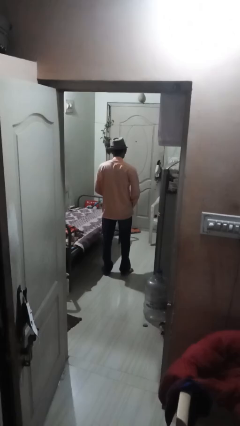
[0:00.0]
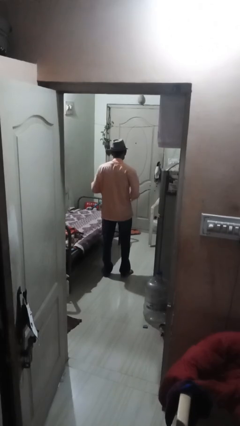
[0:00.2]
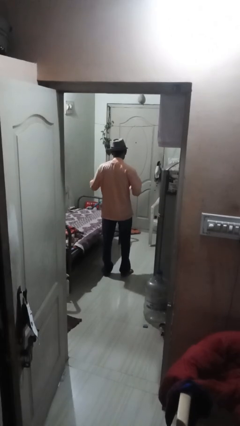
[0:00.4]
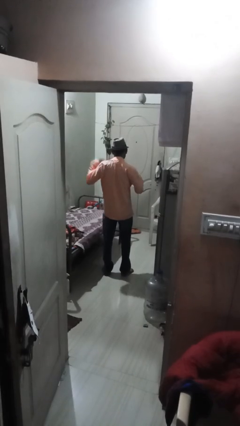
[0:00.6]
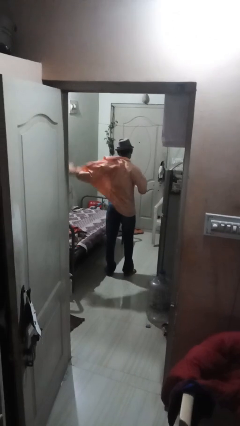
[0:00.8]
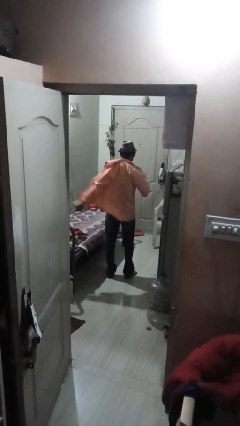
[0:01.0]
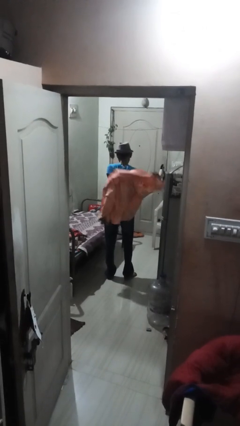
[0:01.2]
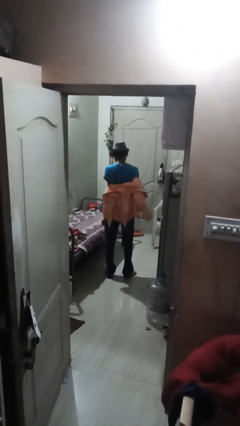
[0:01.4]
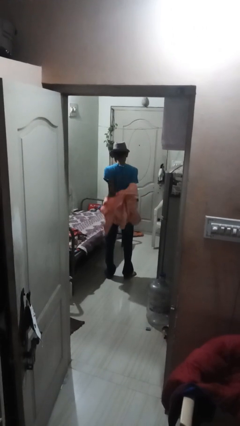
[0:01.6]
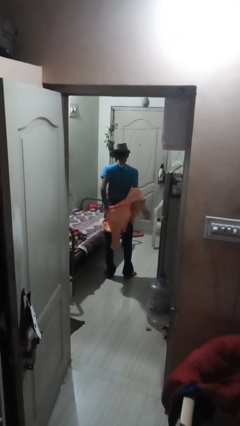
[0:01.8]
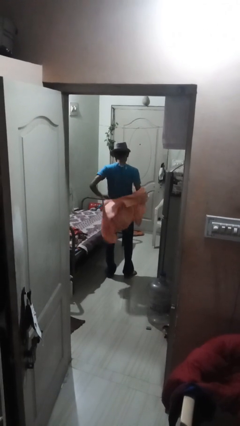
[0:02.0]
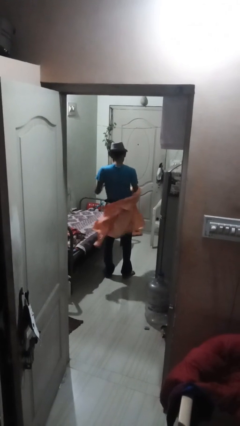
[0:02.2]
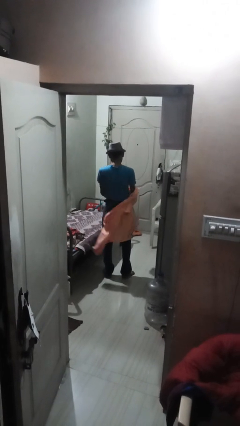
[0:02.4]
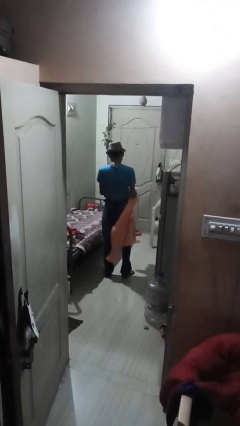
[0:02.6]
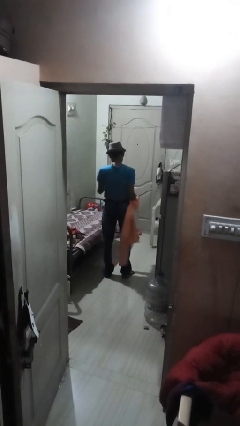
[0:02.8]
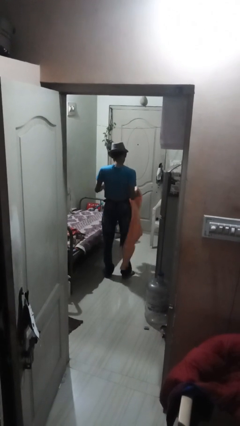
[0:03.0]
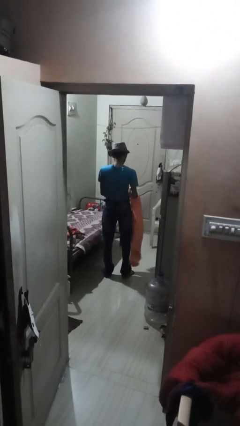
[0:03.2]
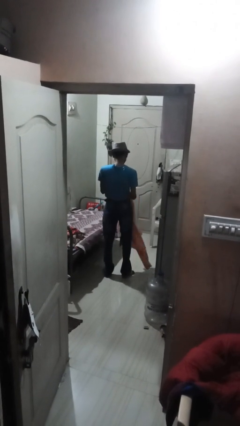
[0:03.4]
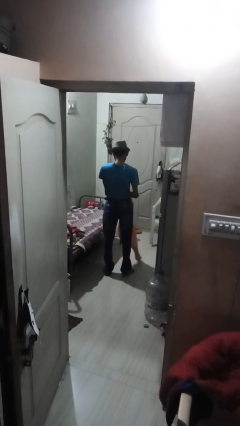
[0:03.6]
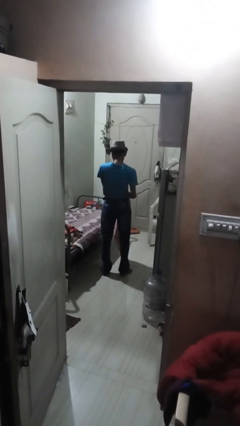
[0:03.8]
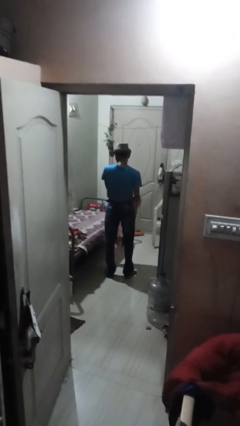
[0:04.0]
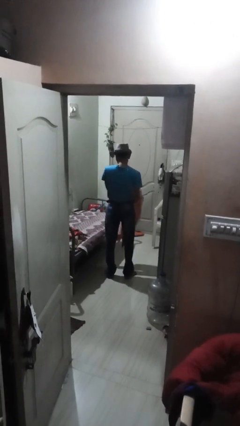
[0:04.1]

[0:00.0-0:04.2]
person takes off shirt

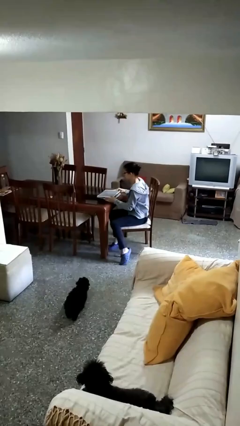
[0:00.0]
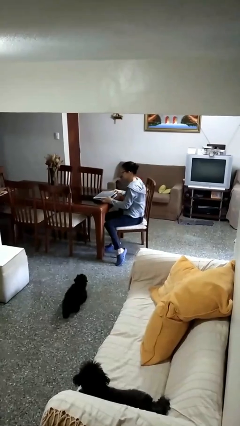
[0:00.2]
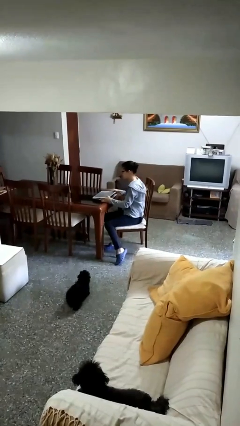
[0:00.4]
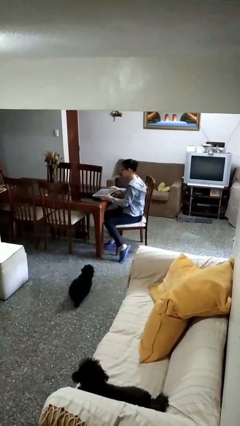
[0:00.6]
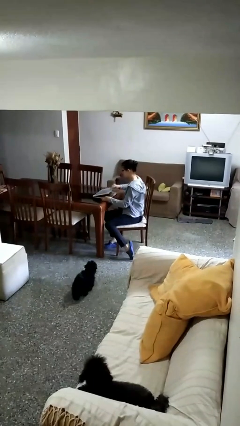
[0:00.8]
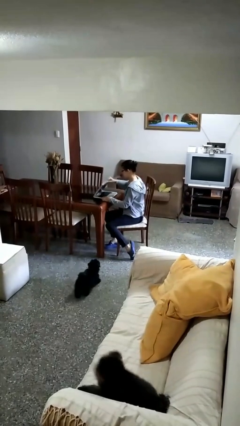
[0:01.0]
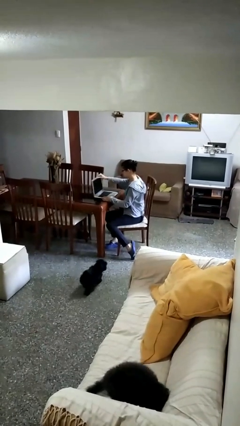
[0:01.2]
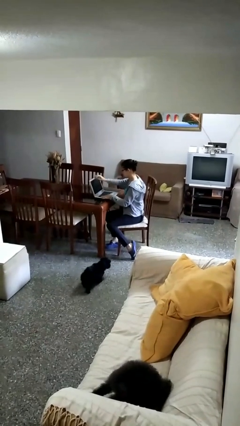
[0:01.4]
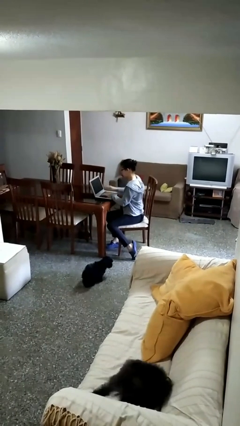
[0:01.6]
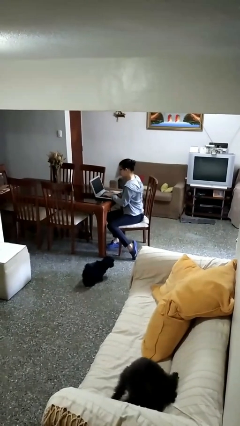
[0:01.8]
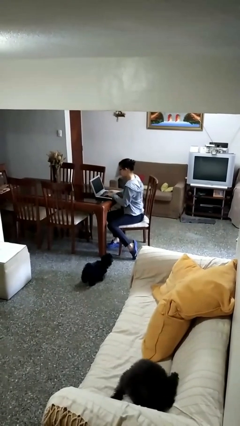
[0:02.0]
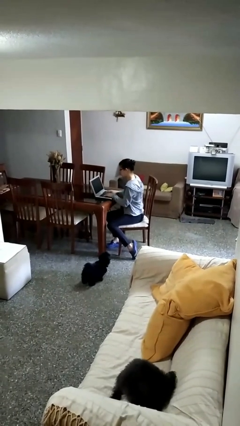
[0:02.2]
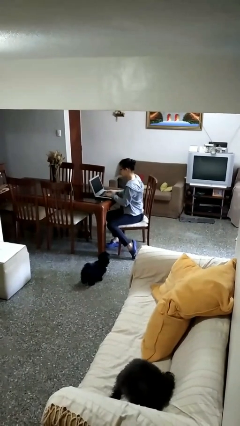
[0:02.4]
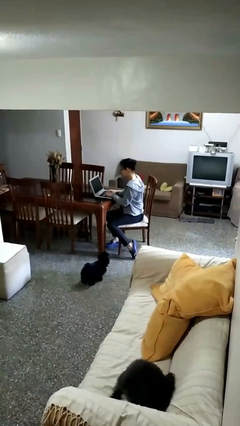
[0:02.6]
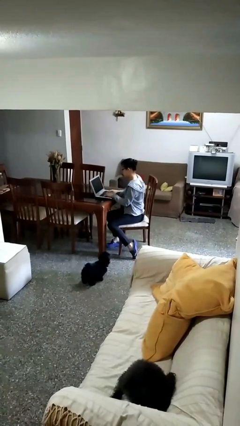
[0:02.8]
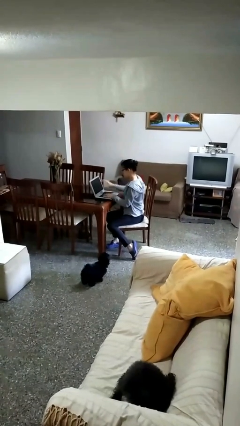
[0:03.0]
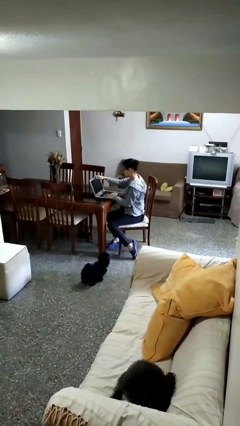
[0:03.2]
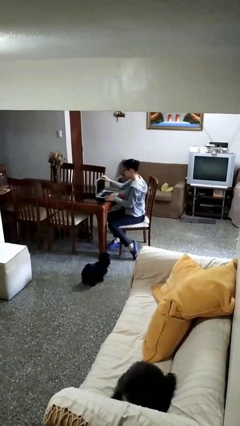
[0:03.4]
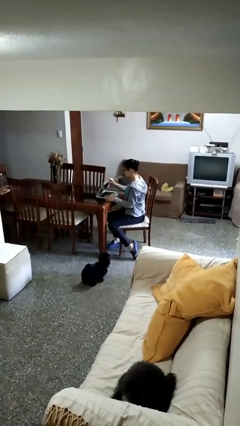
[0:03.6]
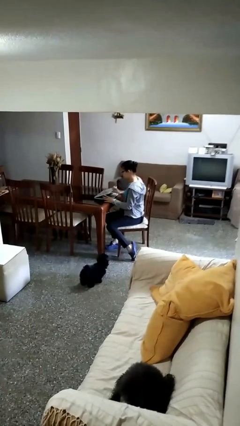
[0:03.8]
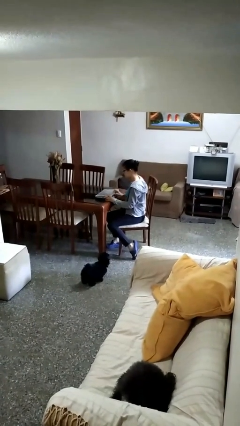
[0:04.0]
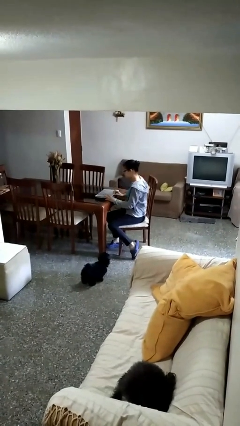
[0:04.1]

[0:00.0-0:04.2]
person interacts with laptop

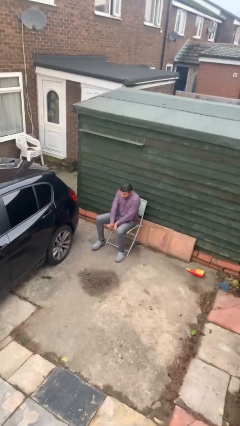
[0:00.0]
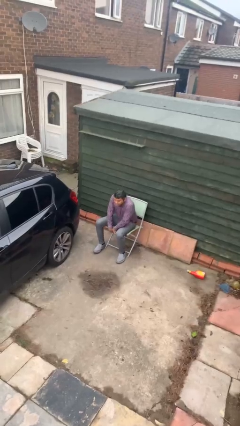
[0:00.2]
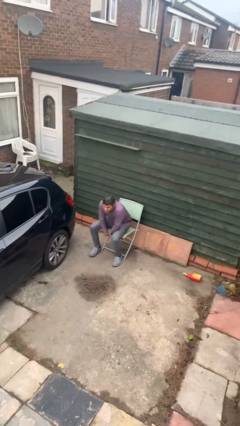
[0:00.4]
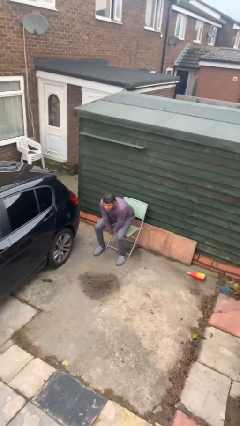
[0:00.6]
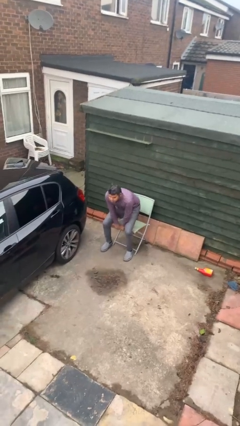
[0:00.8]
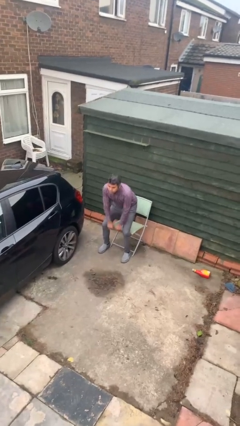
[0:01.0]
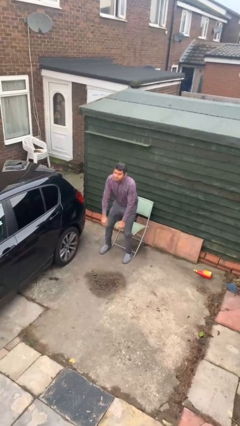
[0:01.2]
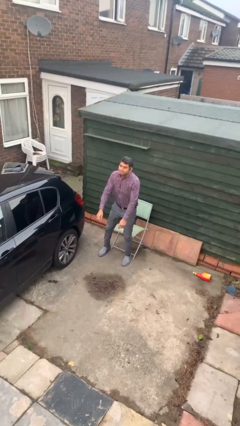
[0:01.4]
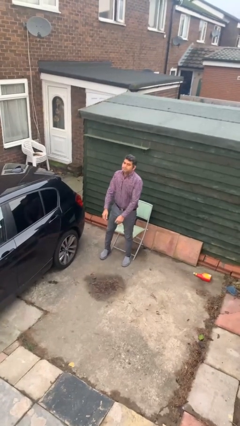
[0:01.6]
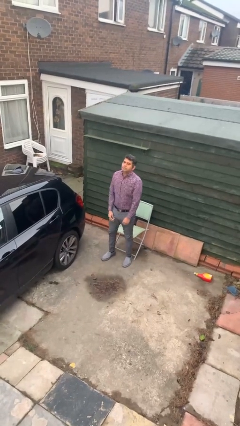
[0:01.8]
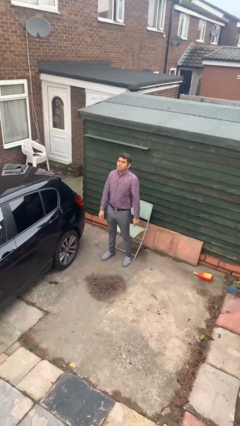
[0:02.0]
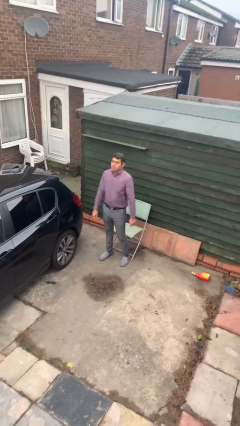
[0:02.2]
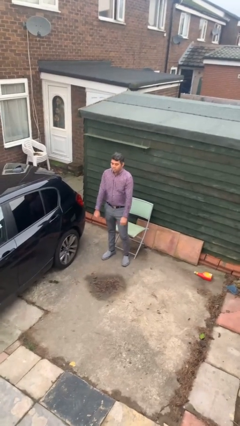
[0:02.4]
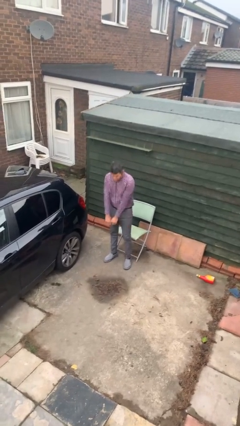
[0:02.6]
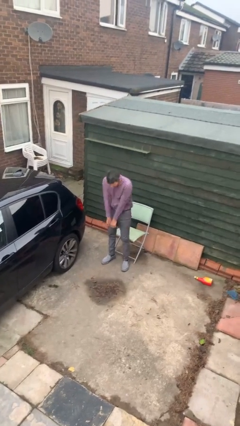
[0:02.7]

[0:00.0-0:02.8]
person stands up

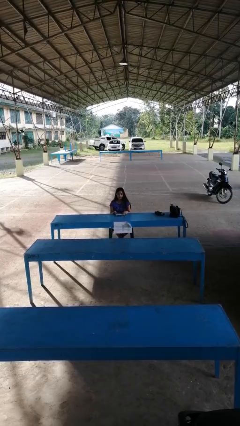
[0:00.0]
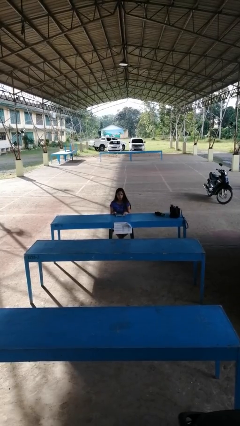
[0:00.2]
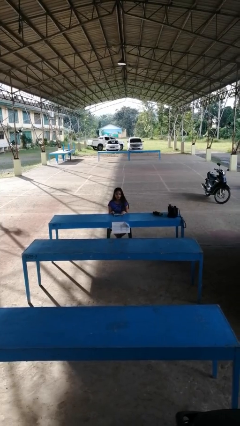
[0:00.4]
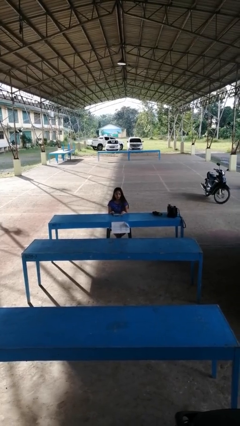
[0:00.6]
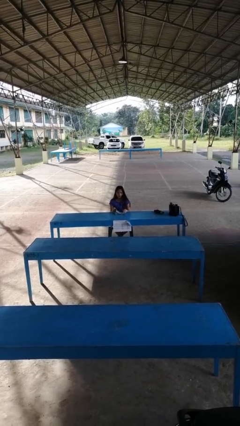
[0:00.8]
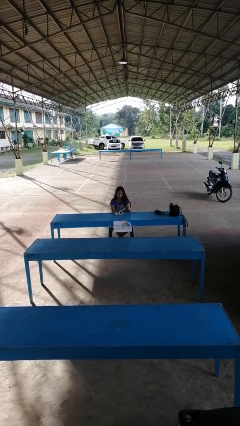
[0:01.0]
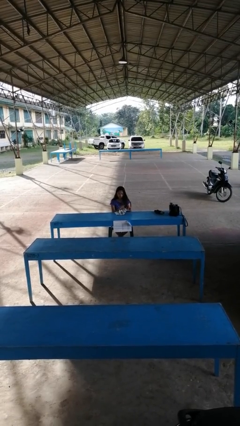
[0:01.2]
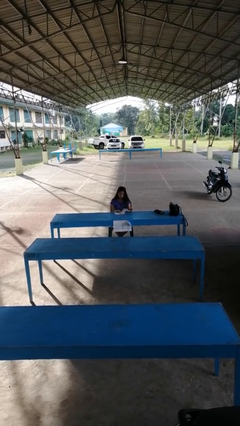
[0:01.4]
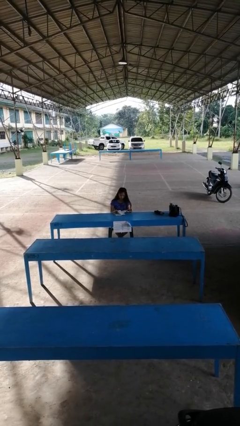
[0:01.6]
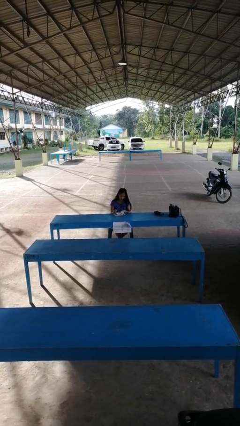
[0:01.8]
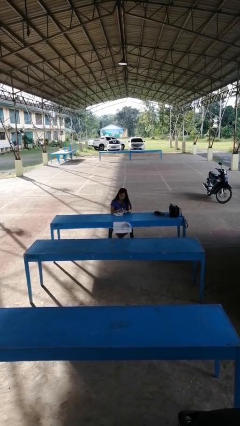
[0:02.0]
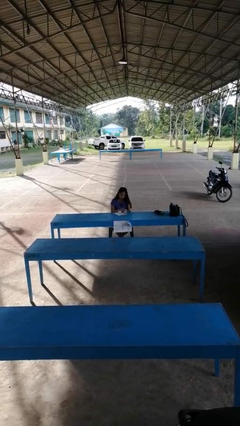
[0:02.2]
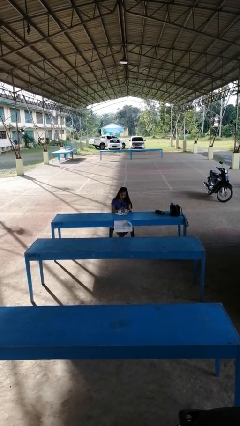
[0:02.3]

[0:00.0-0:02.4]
person reads magazine

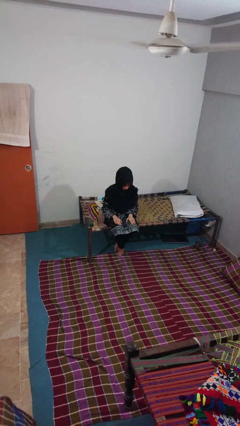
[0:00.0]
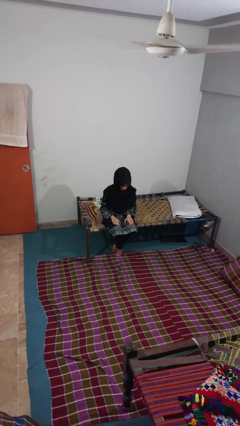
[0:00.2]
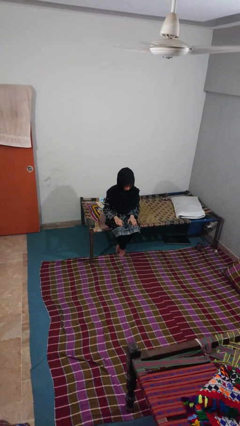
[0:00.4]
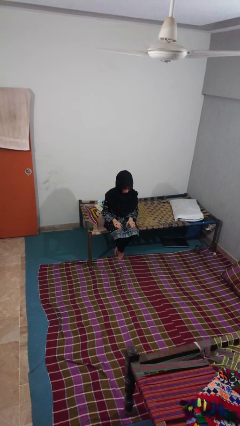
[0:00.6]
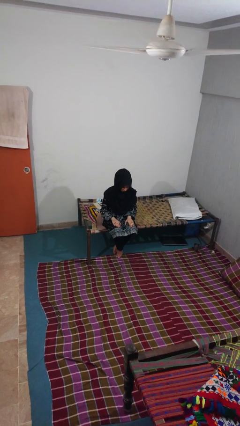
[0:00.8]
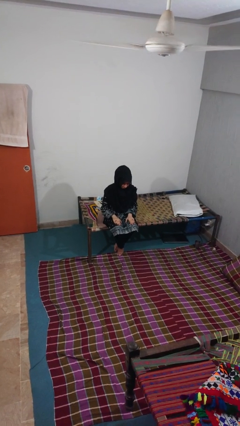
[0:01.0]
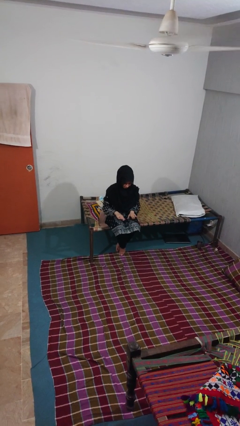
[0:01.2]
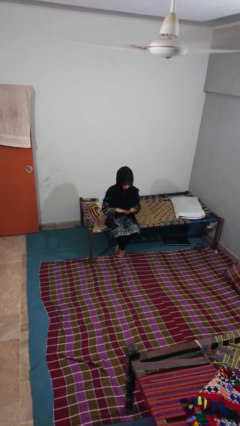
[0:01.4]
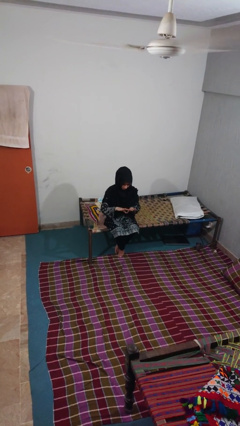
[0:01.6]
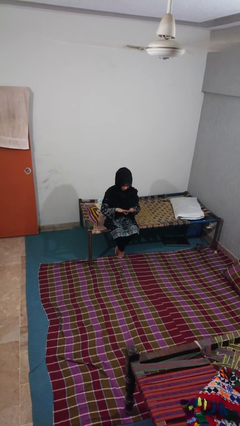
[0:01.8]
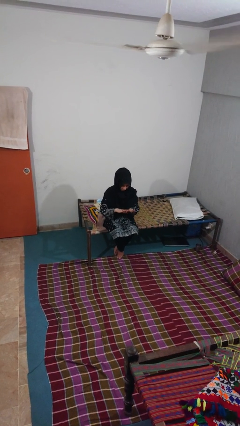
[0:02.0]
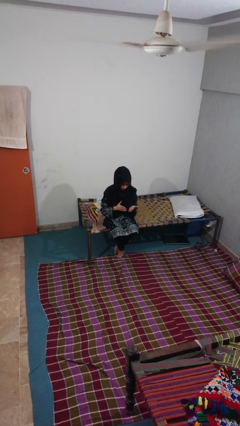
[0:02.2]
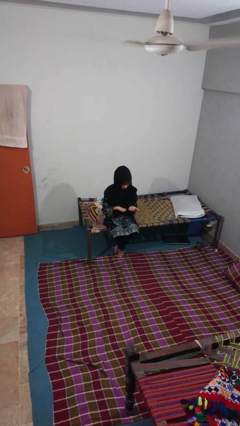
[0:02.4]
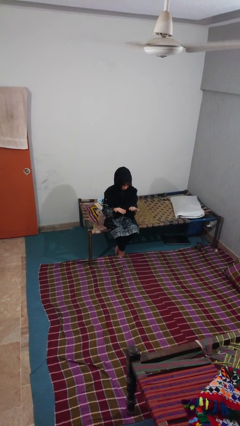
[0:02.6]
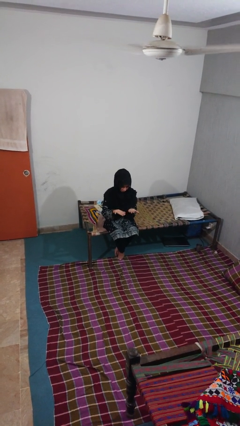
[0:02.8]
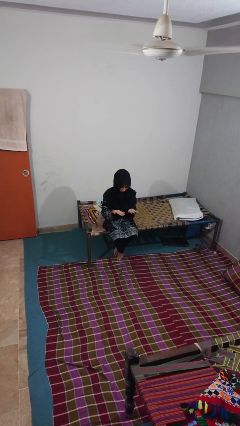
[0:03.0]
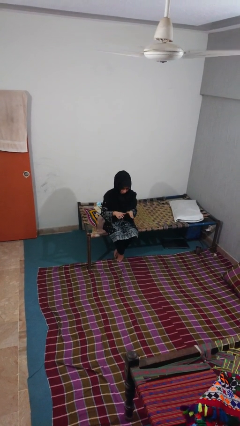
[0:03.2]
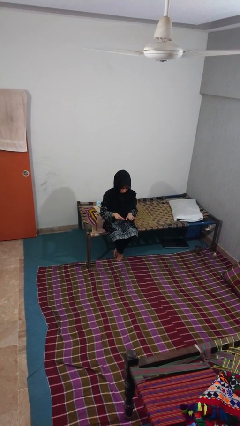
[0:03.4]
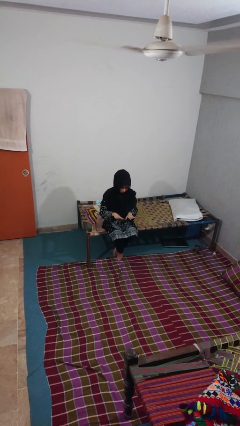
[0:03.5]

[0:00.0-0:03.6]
person looks at hands in lap

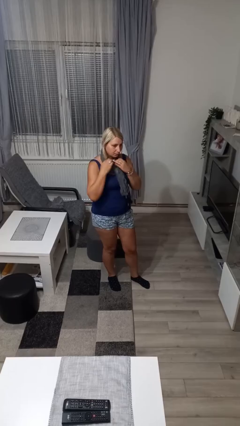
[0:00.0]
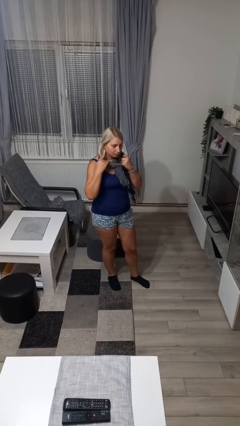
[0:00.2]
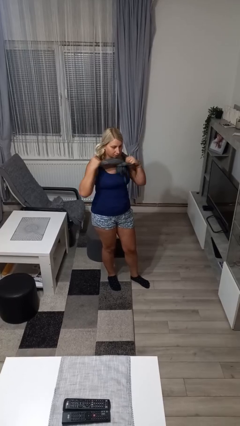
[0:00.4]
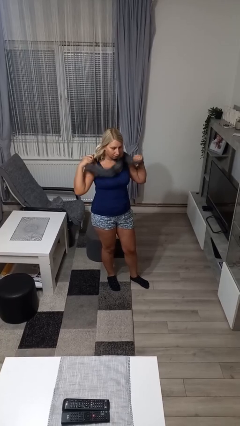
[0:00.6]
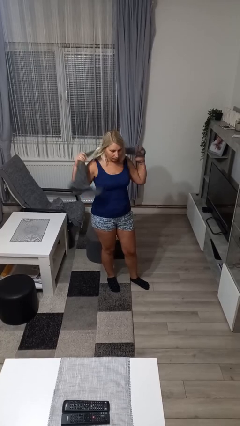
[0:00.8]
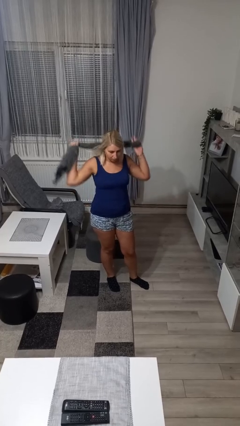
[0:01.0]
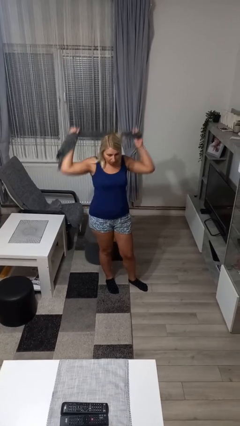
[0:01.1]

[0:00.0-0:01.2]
person takes off scarf
